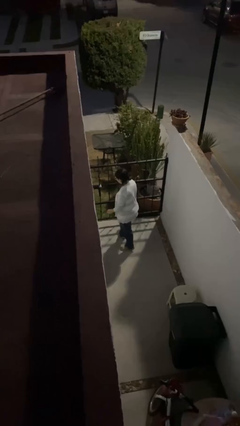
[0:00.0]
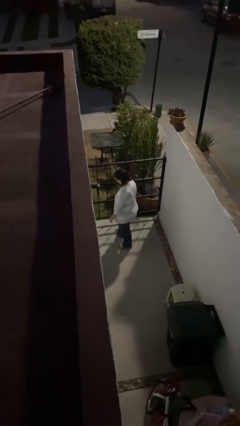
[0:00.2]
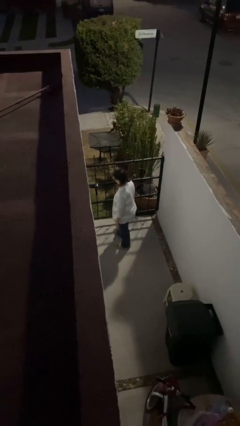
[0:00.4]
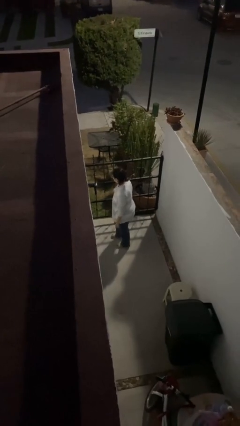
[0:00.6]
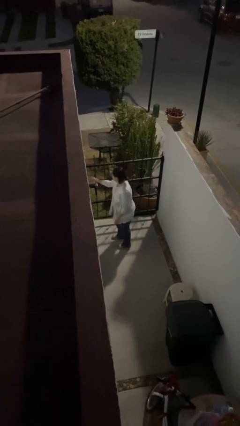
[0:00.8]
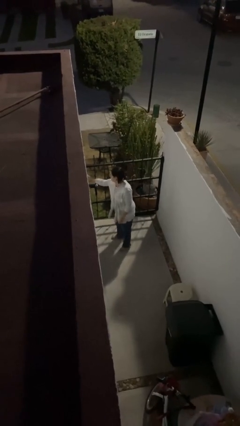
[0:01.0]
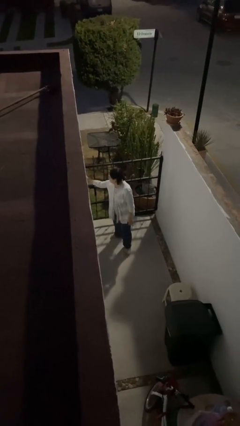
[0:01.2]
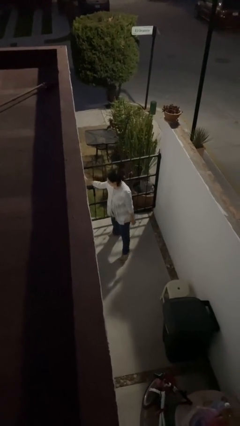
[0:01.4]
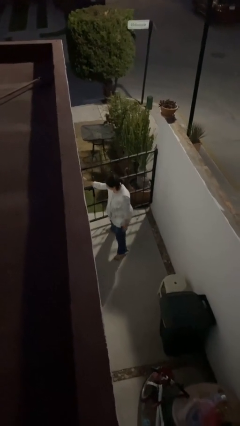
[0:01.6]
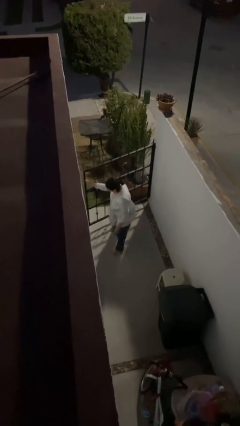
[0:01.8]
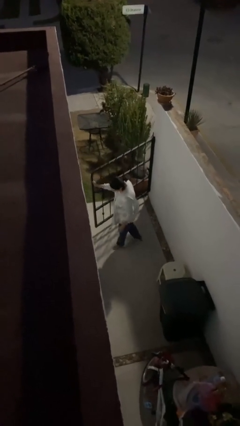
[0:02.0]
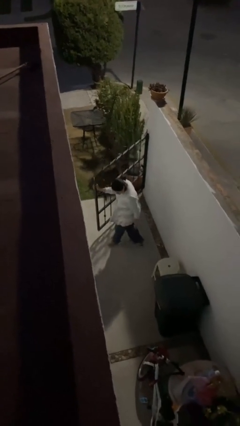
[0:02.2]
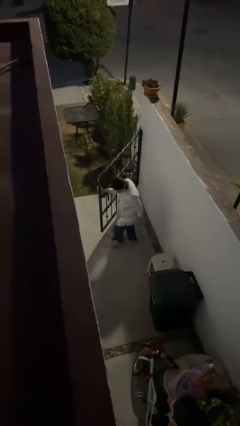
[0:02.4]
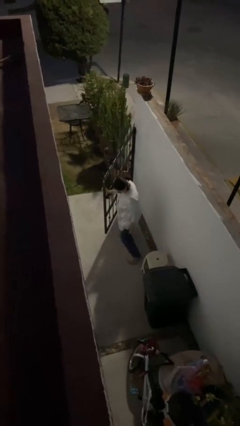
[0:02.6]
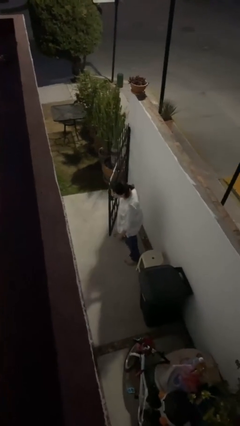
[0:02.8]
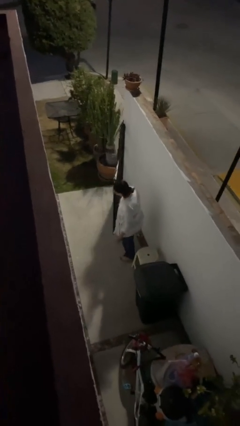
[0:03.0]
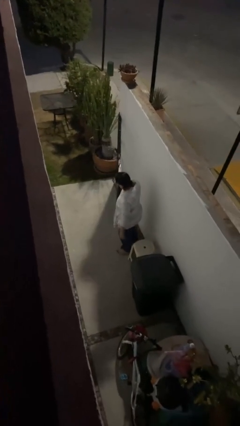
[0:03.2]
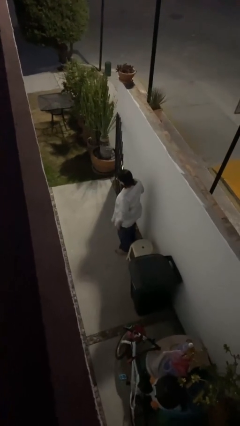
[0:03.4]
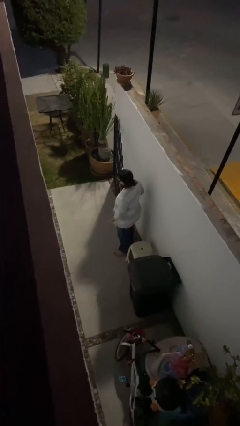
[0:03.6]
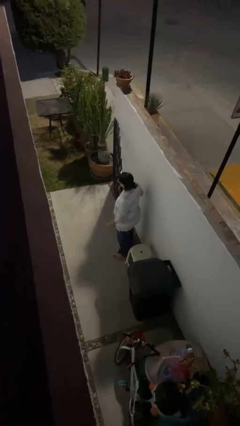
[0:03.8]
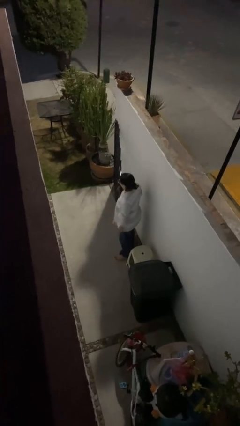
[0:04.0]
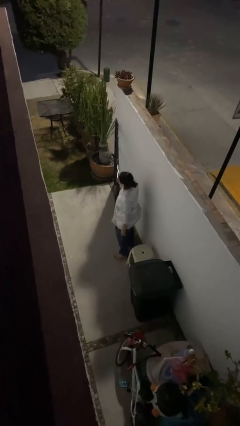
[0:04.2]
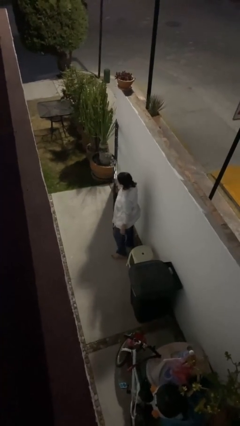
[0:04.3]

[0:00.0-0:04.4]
person opens facility door

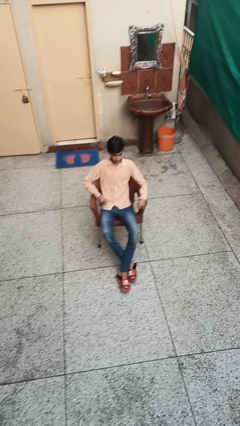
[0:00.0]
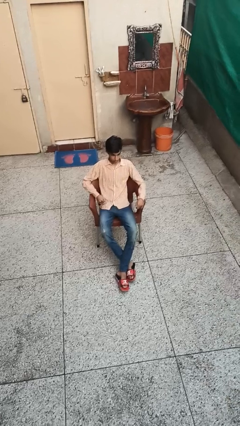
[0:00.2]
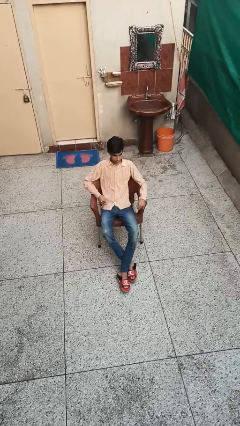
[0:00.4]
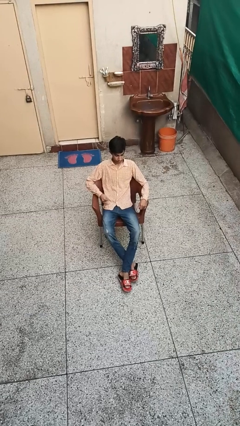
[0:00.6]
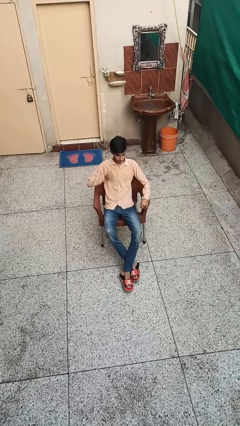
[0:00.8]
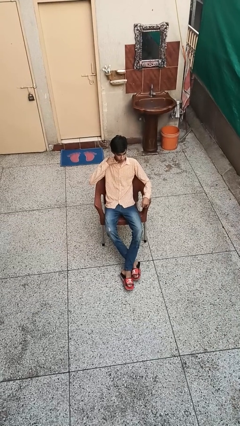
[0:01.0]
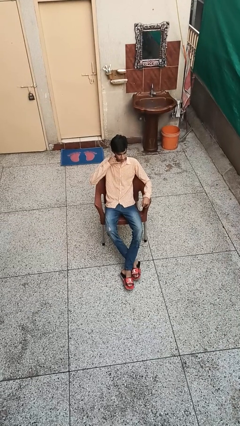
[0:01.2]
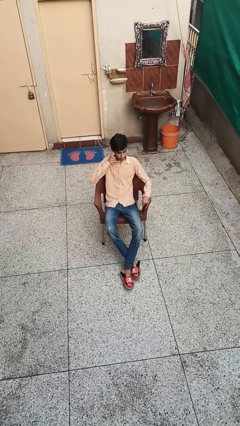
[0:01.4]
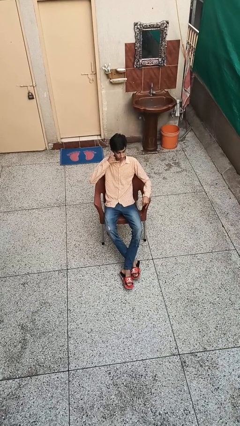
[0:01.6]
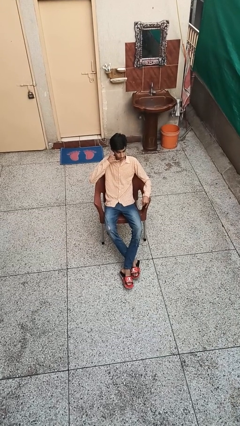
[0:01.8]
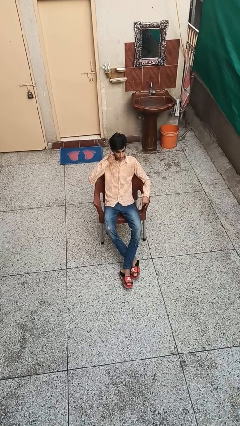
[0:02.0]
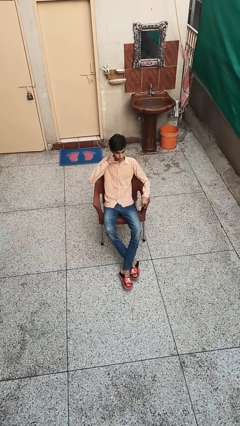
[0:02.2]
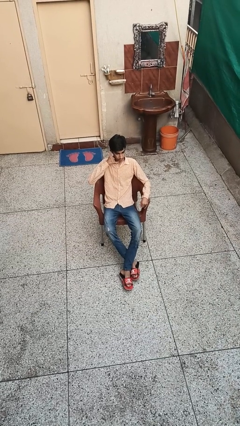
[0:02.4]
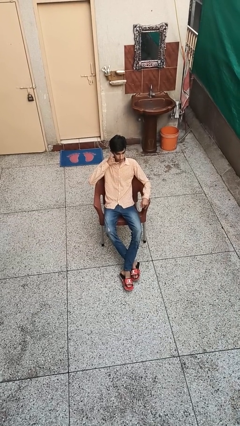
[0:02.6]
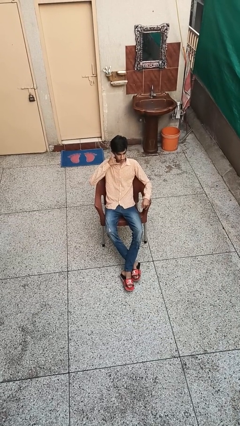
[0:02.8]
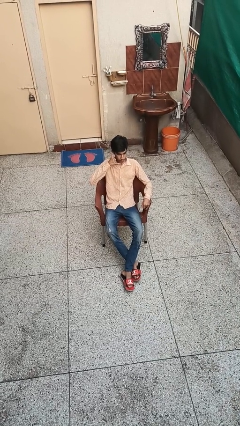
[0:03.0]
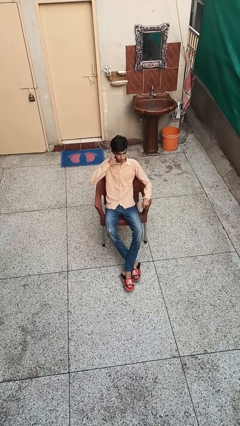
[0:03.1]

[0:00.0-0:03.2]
person gestures call me

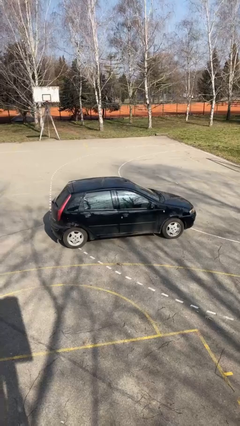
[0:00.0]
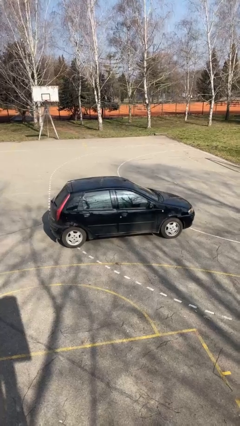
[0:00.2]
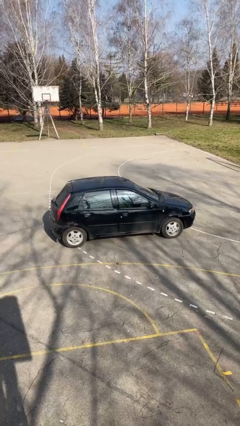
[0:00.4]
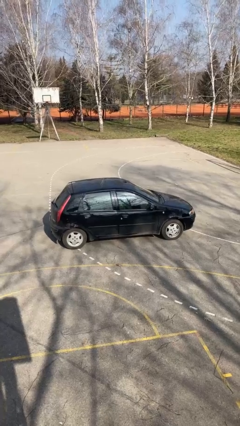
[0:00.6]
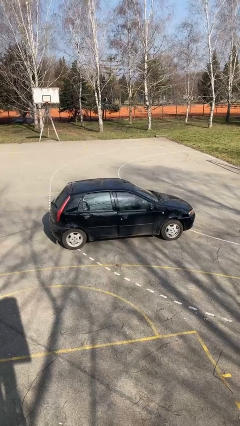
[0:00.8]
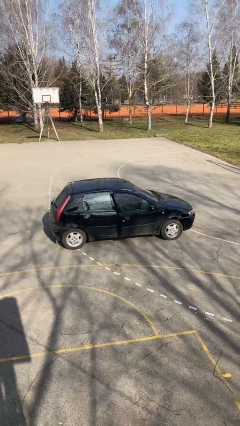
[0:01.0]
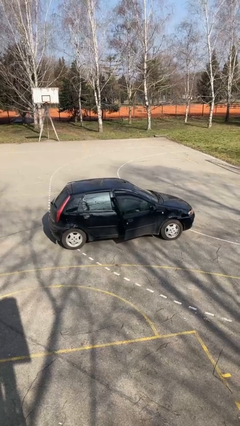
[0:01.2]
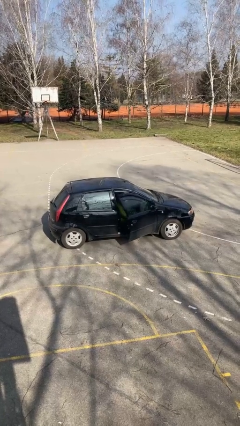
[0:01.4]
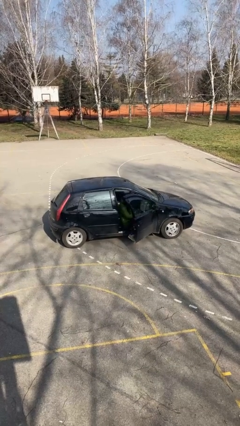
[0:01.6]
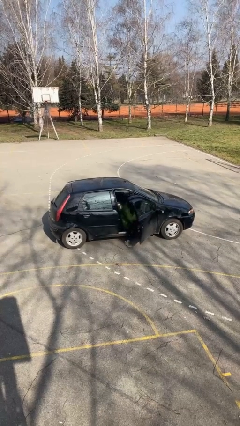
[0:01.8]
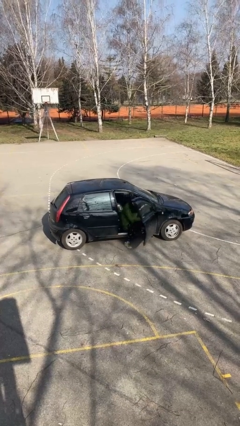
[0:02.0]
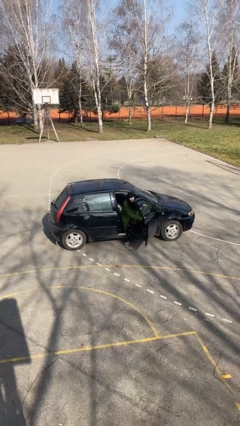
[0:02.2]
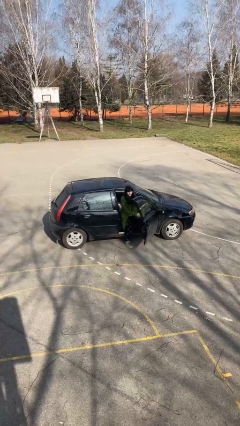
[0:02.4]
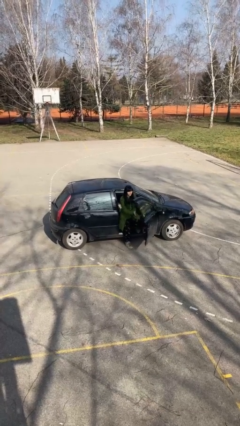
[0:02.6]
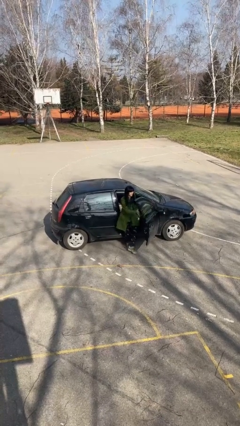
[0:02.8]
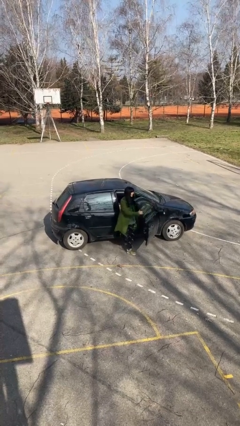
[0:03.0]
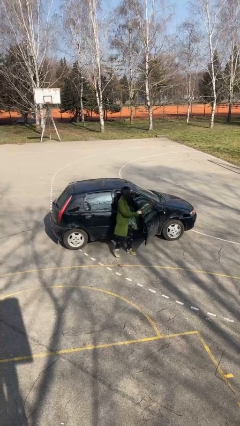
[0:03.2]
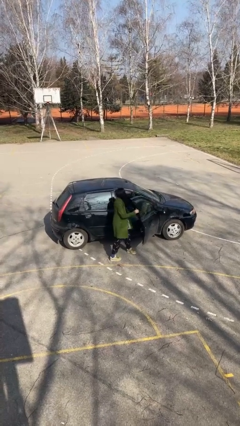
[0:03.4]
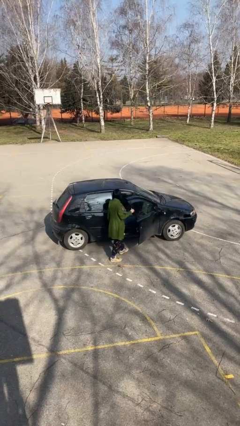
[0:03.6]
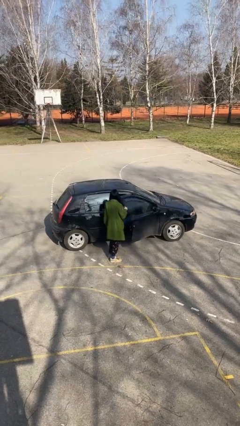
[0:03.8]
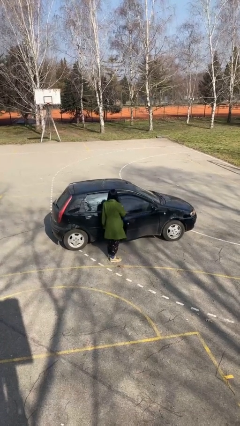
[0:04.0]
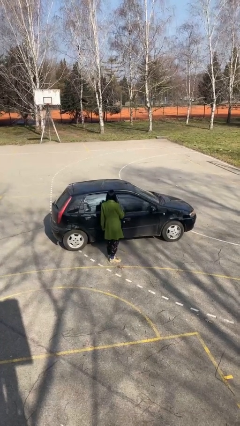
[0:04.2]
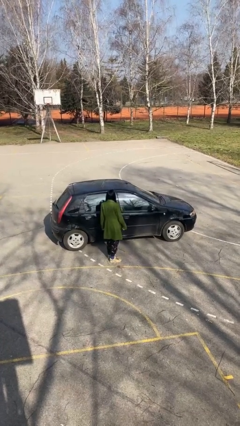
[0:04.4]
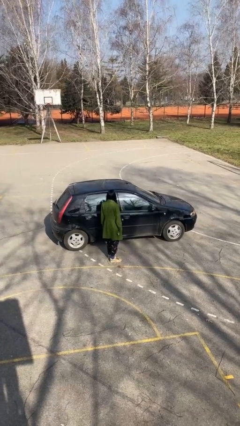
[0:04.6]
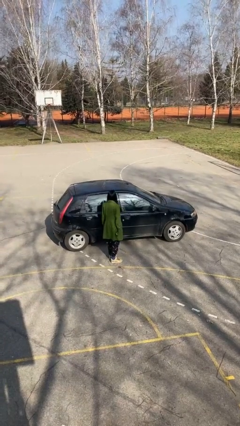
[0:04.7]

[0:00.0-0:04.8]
car drops off person

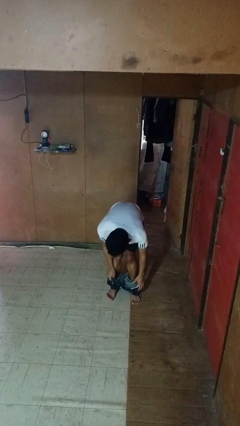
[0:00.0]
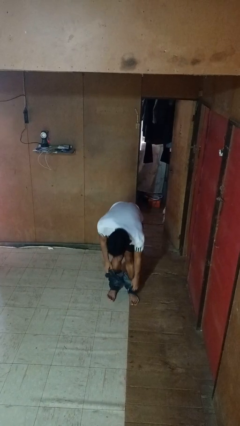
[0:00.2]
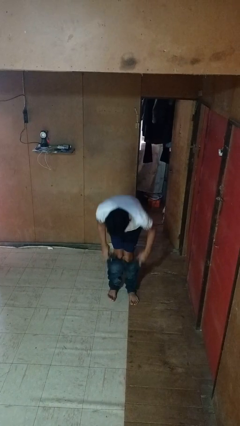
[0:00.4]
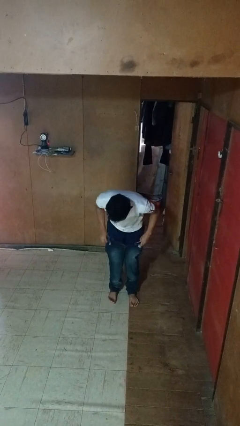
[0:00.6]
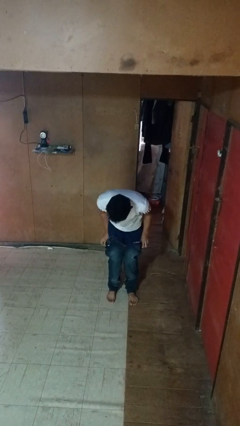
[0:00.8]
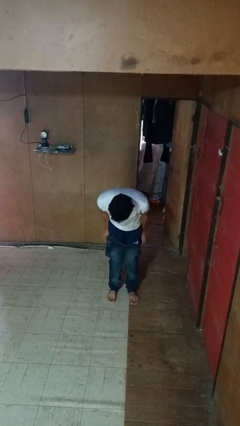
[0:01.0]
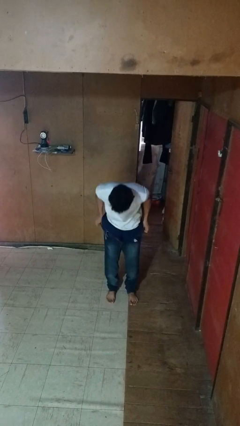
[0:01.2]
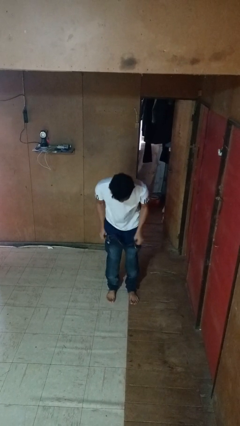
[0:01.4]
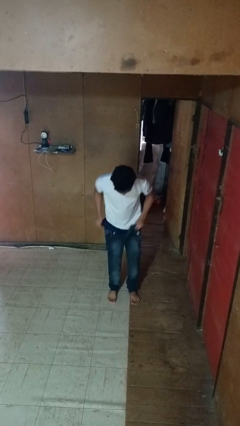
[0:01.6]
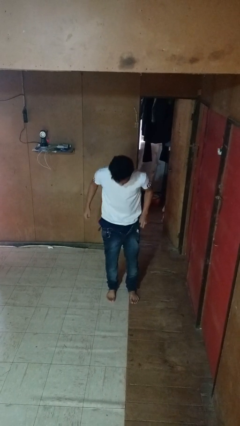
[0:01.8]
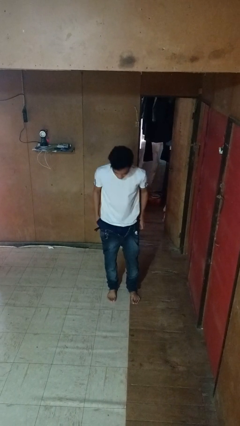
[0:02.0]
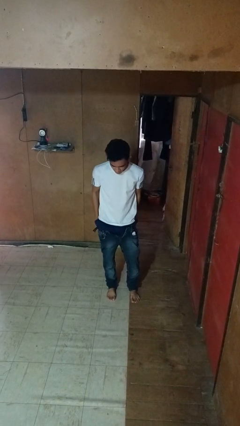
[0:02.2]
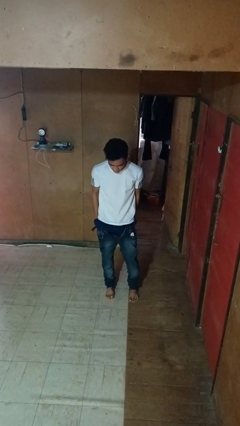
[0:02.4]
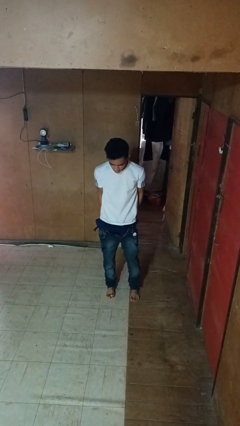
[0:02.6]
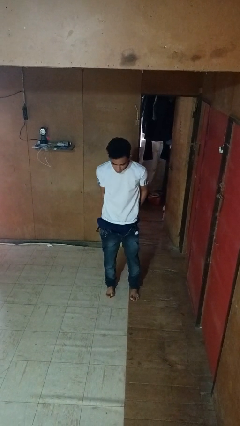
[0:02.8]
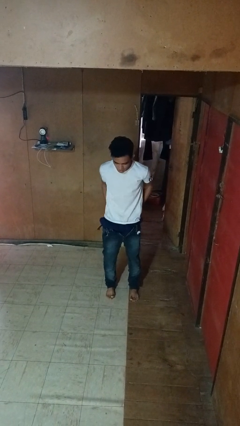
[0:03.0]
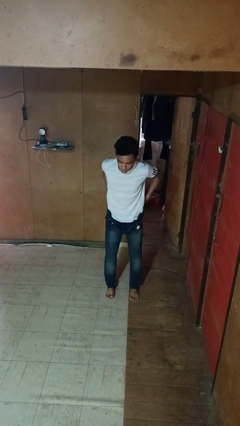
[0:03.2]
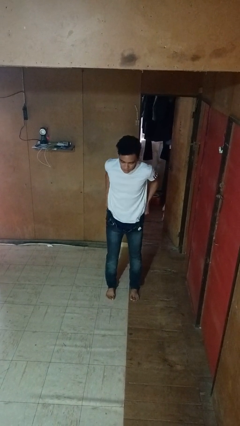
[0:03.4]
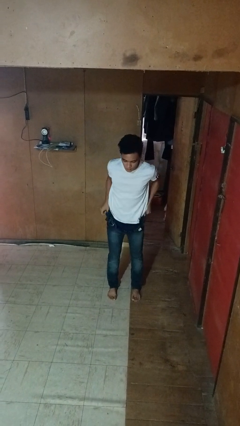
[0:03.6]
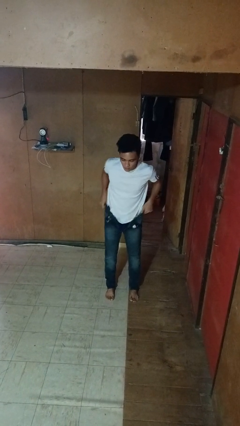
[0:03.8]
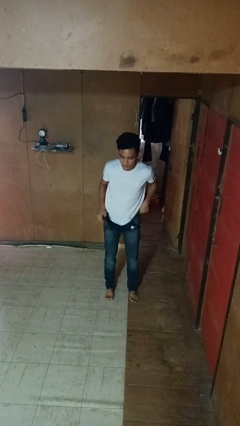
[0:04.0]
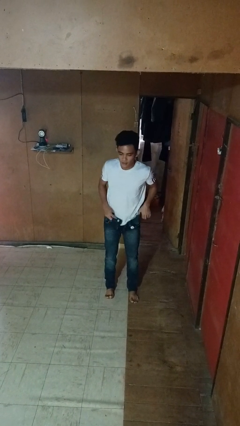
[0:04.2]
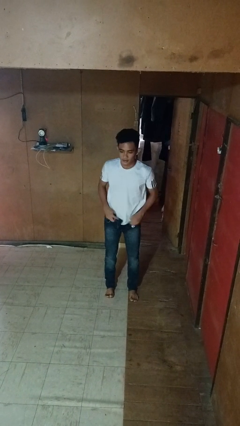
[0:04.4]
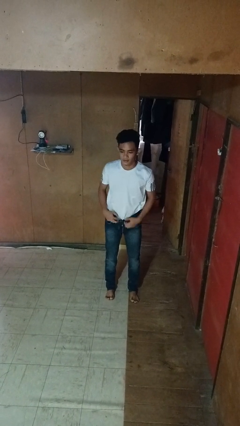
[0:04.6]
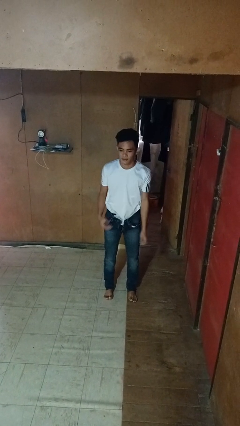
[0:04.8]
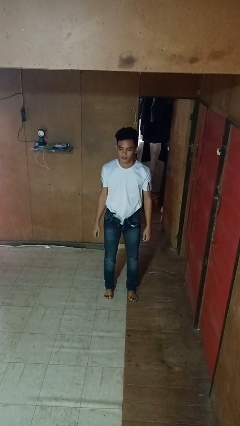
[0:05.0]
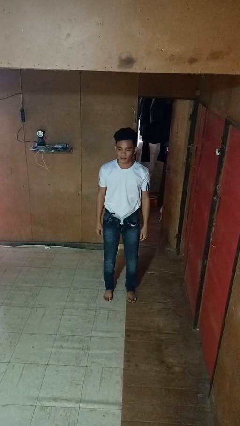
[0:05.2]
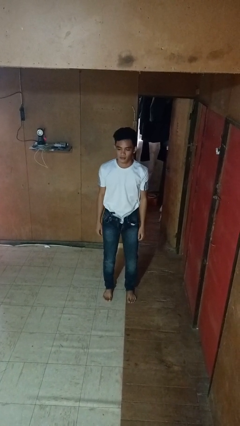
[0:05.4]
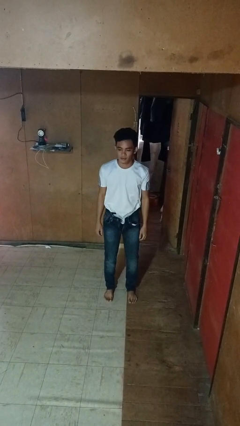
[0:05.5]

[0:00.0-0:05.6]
person puts on pants
